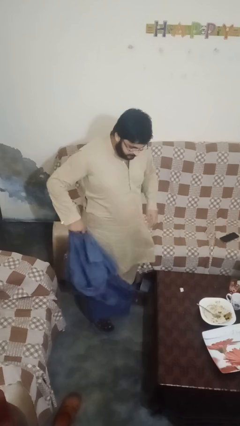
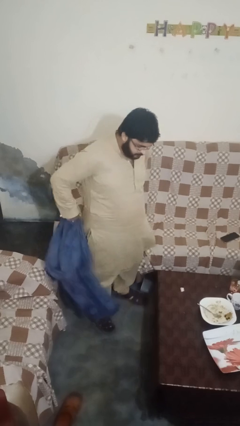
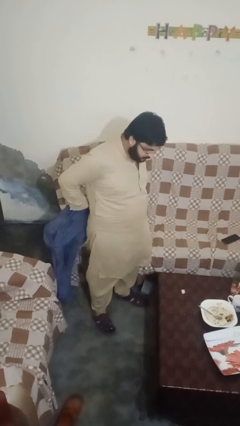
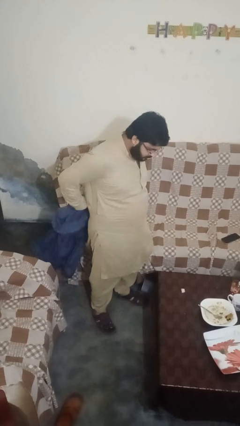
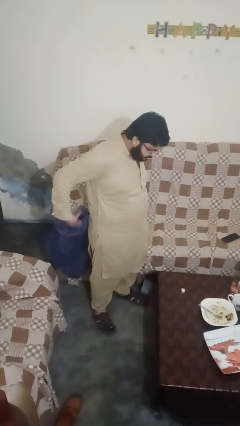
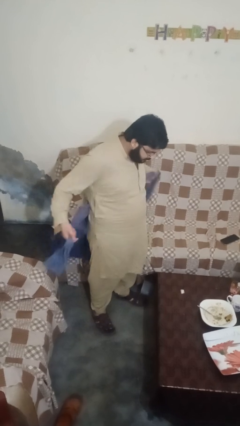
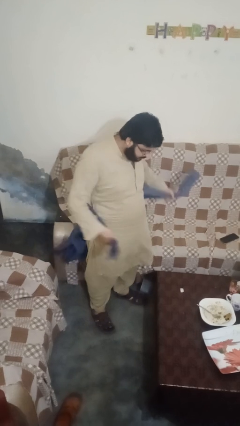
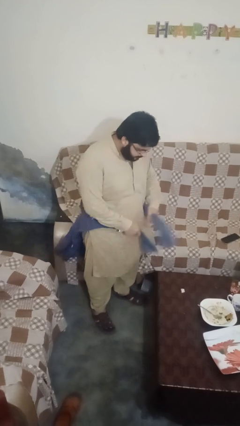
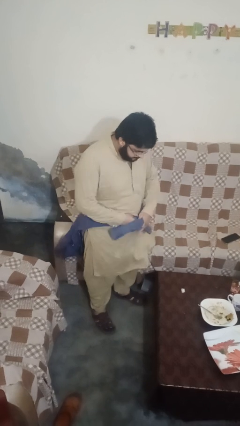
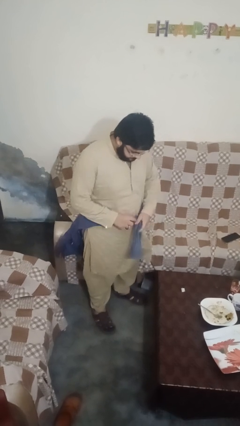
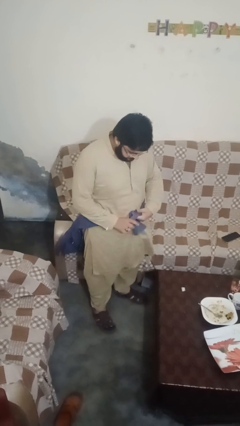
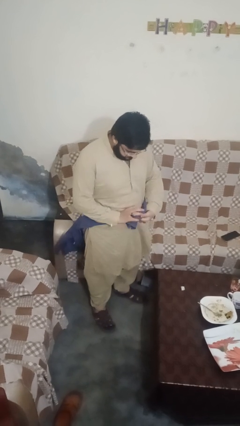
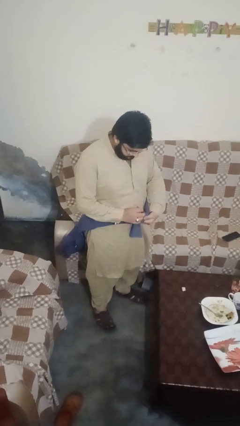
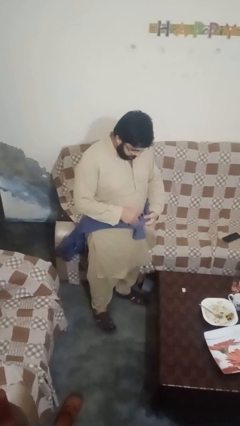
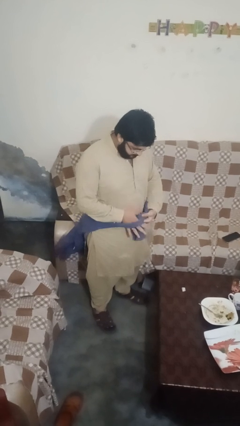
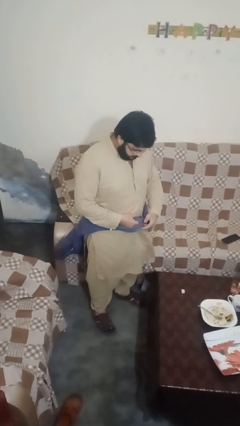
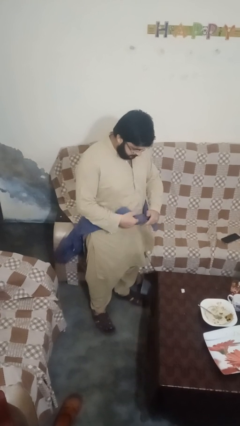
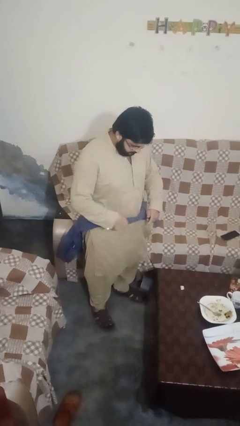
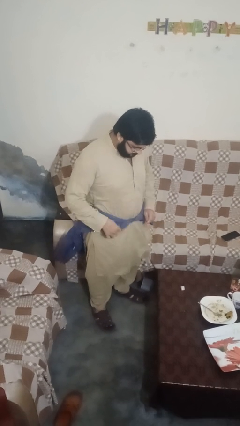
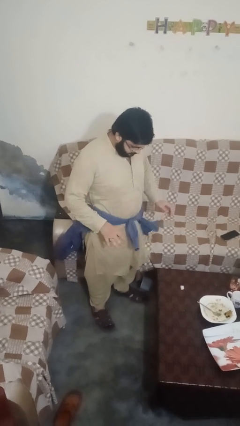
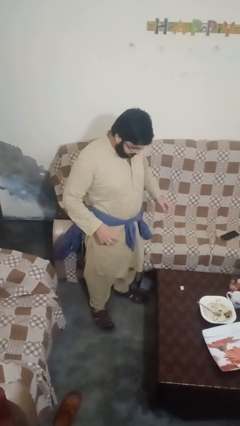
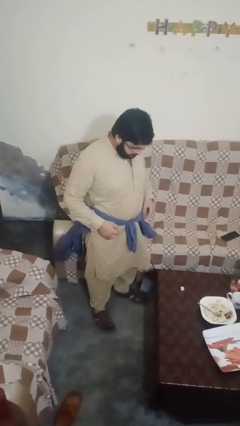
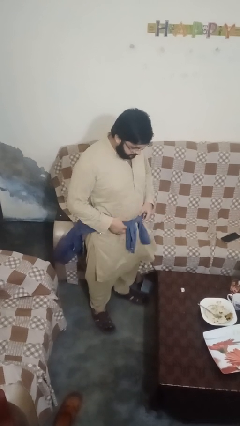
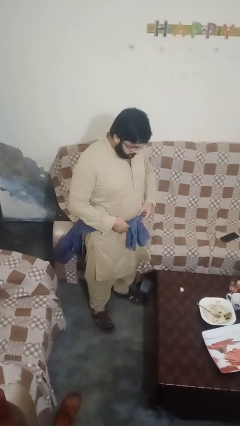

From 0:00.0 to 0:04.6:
person ties jacket around waist

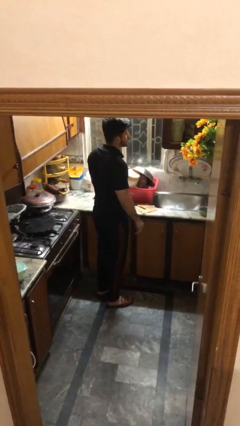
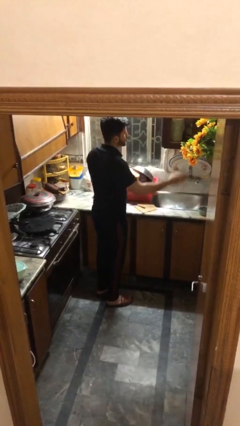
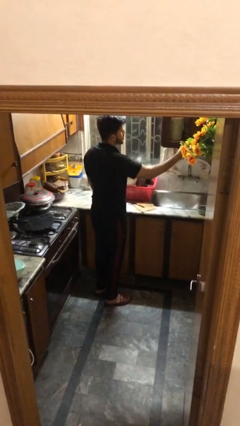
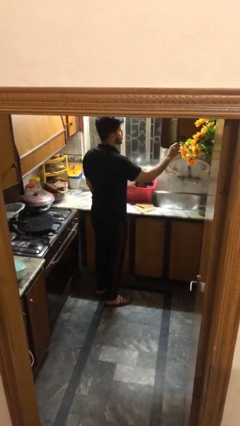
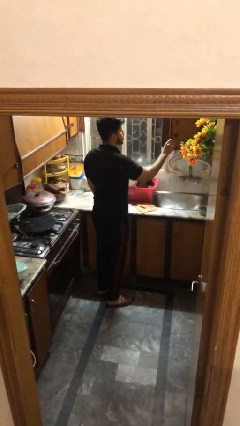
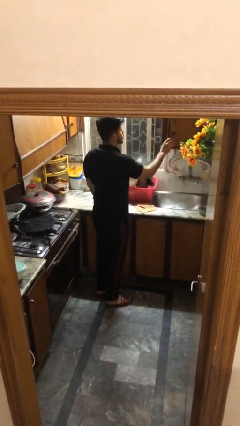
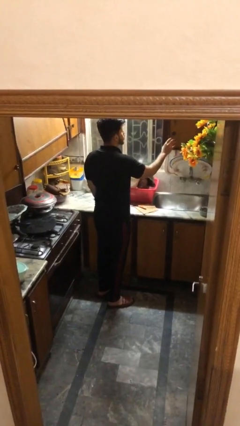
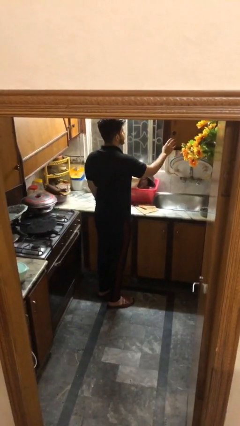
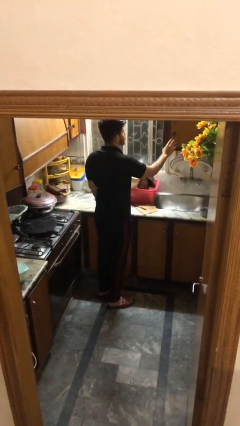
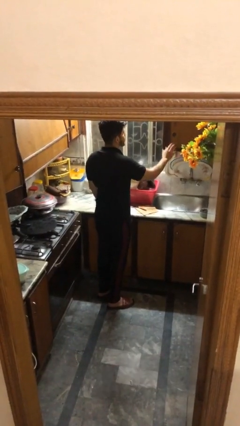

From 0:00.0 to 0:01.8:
person closes kitchen drawer

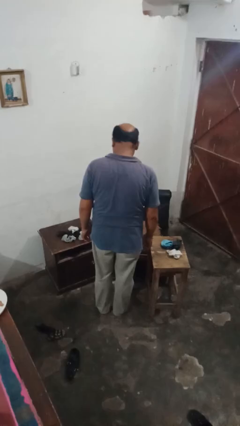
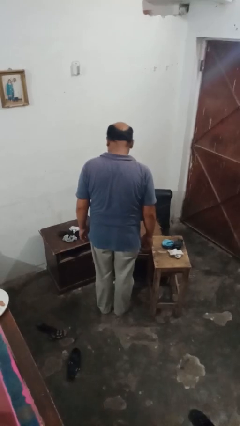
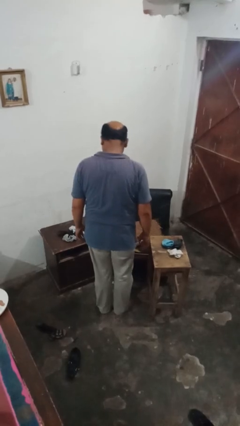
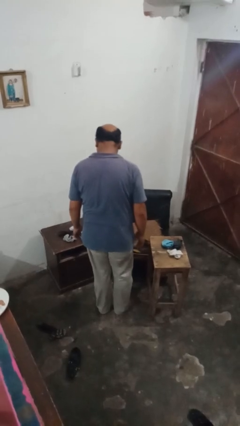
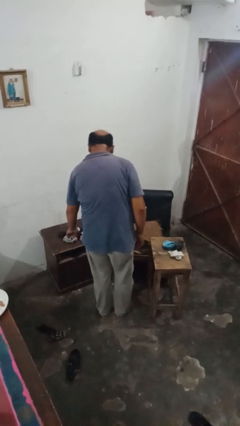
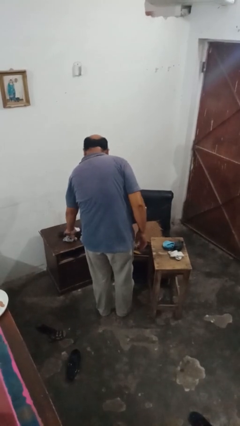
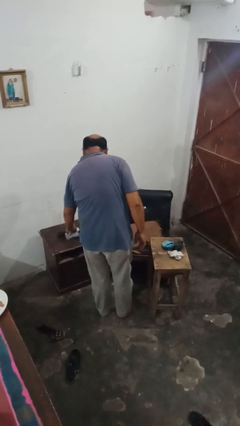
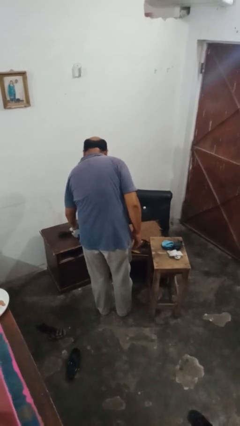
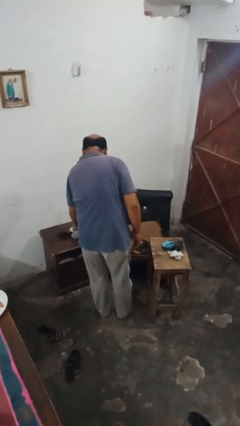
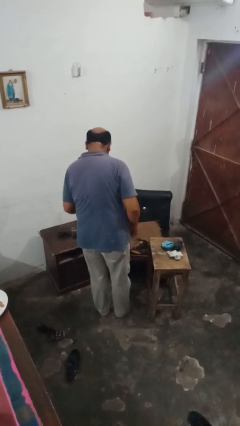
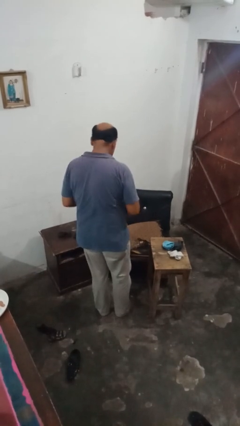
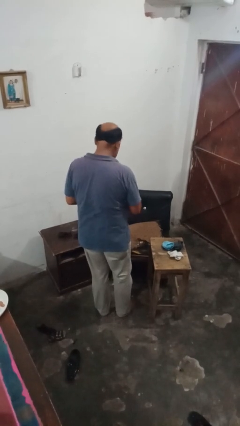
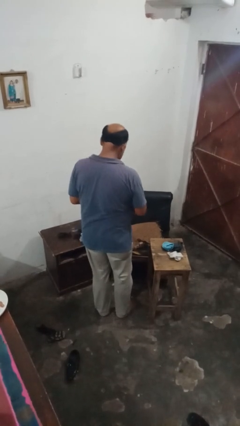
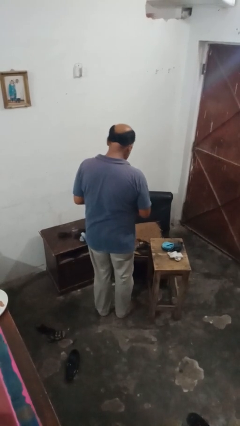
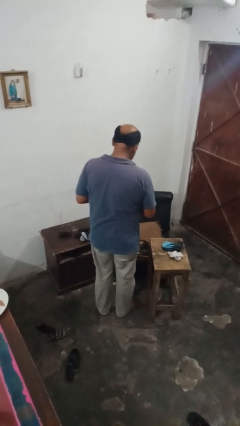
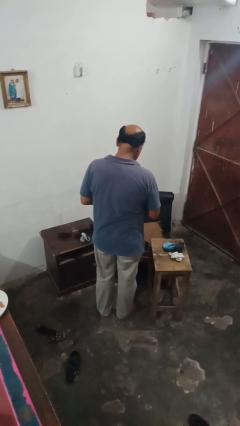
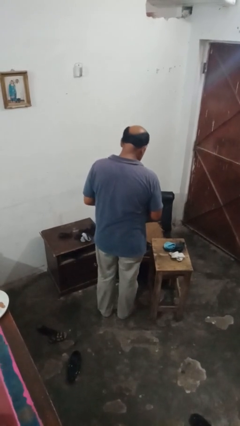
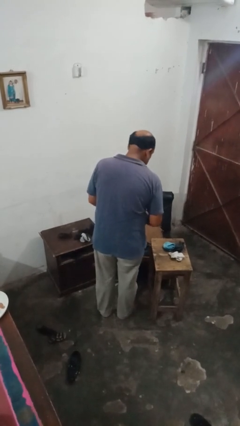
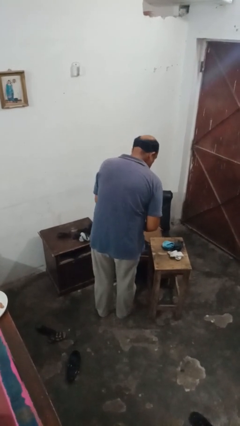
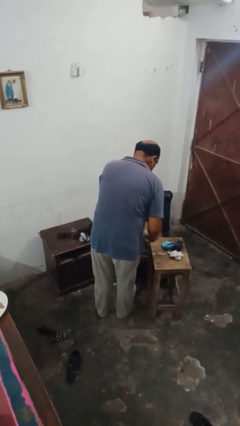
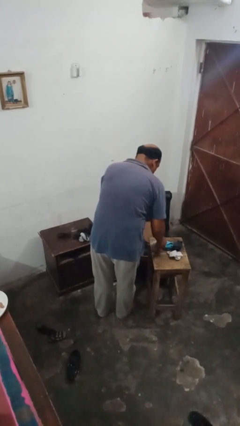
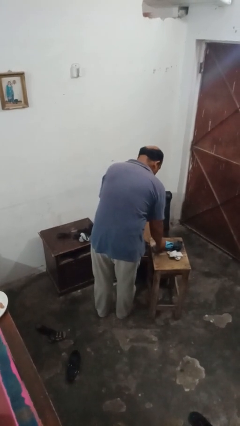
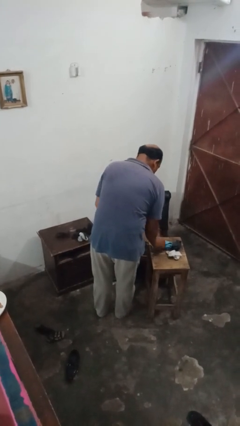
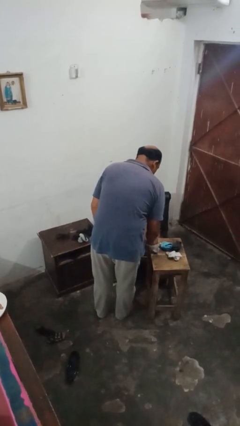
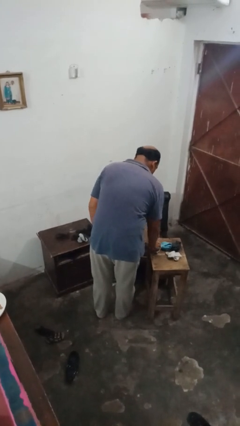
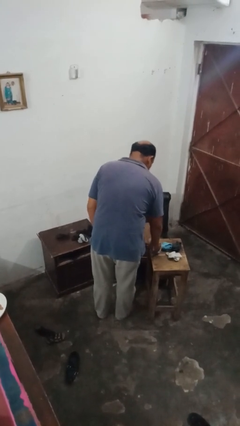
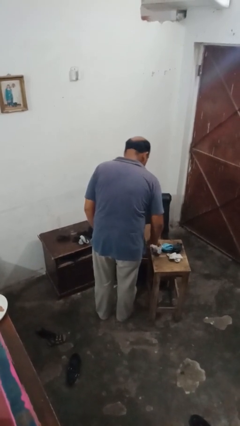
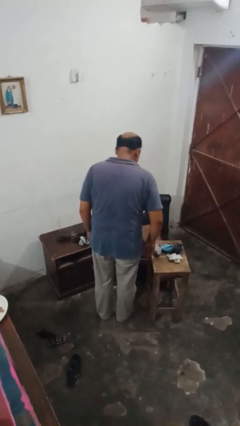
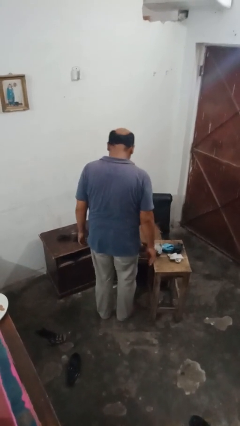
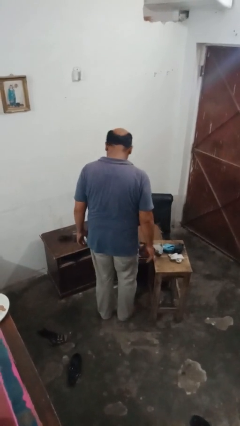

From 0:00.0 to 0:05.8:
person folds socks

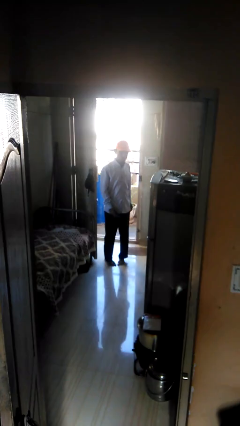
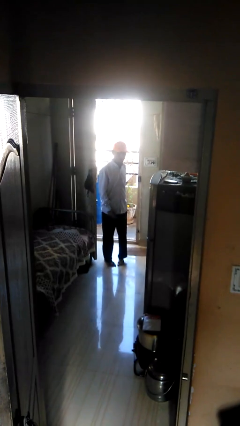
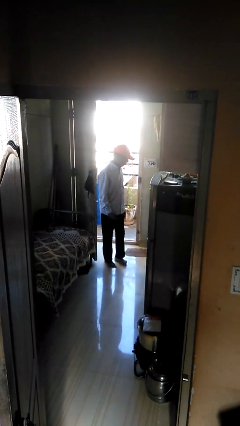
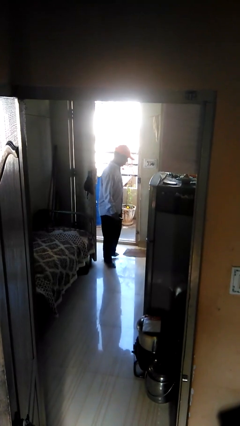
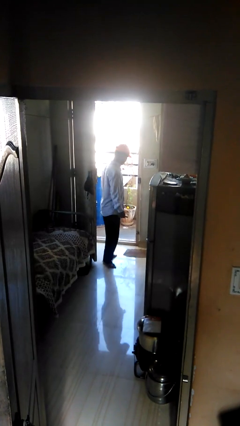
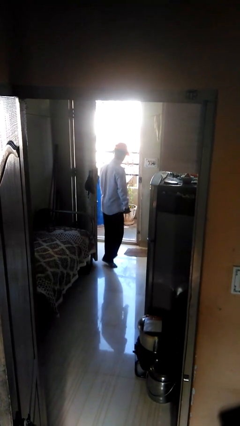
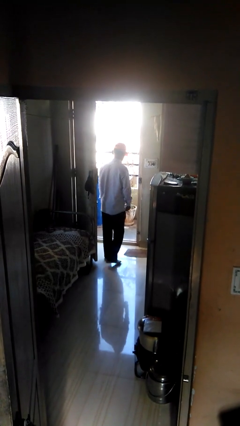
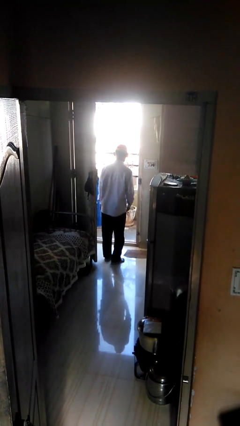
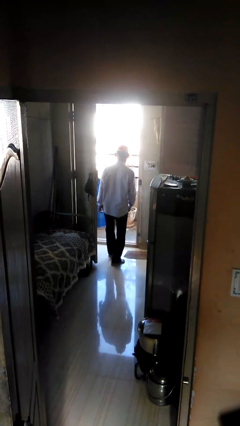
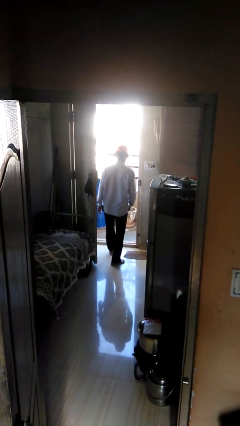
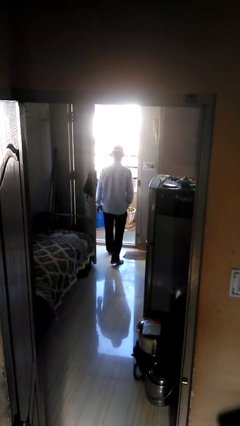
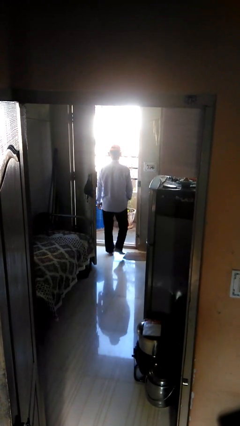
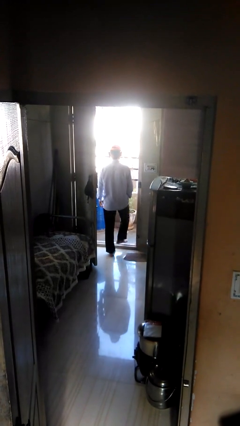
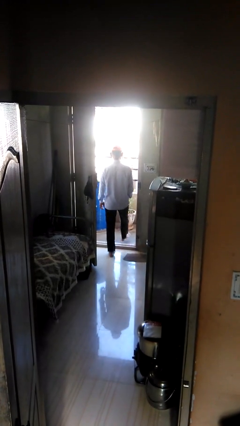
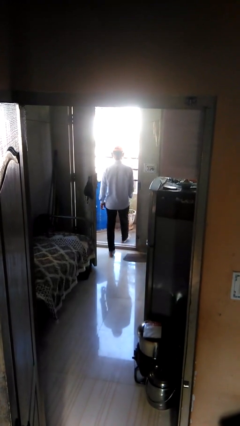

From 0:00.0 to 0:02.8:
person exits scene through structure

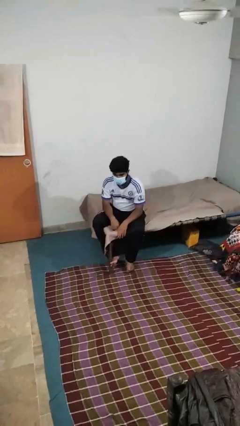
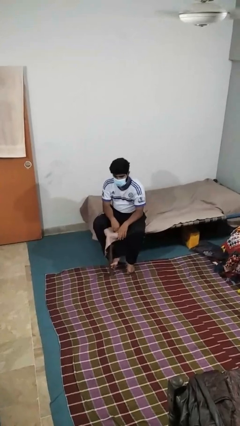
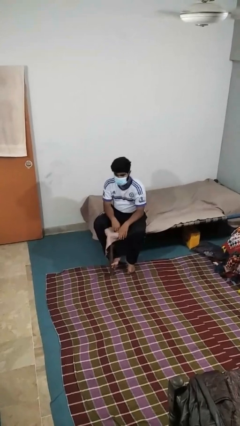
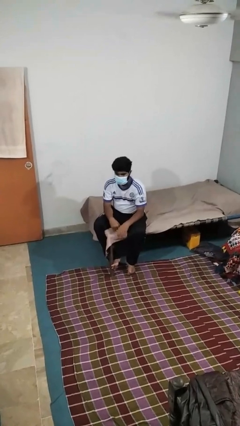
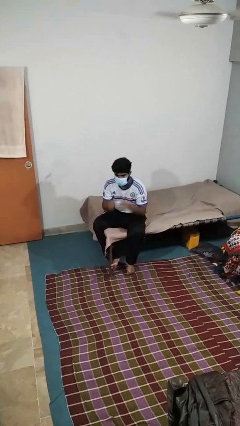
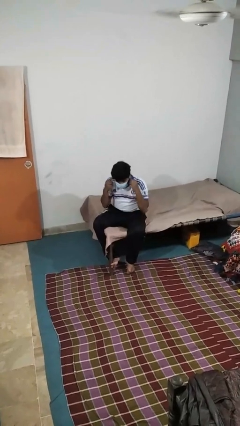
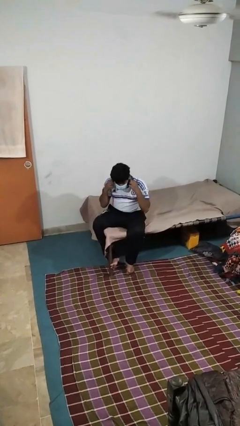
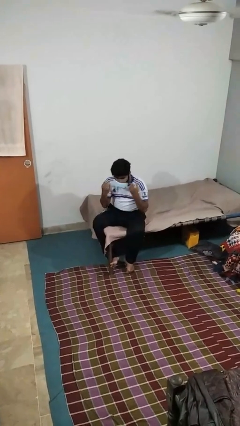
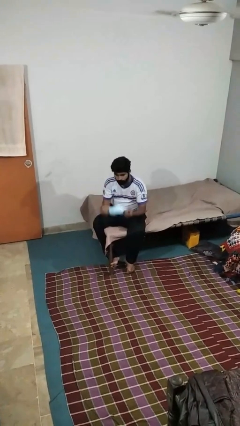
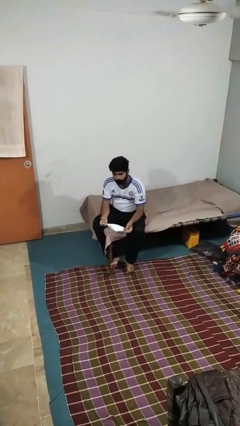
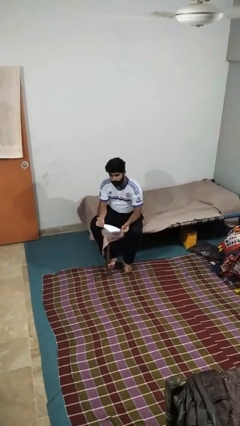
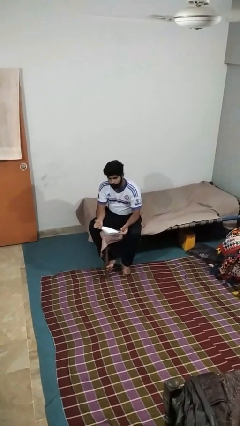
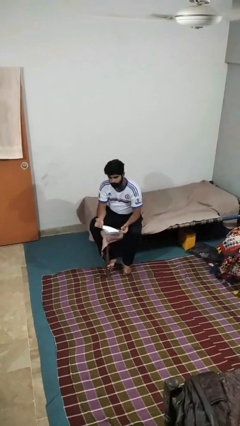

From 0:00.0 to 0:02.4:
person takes off facemask

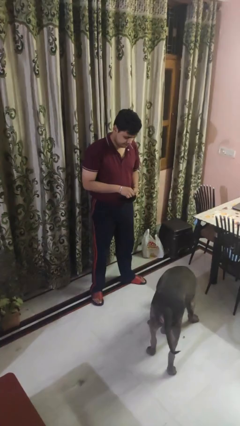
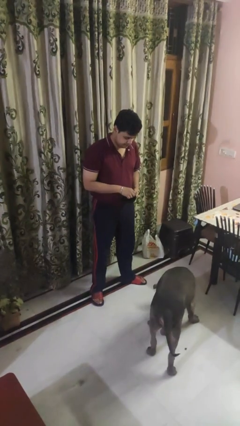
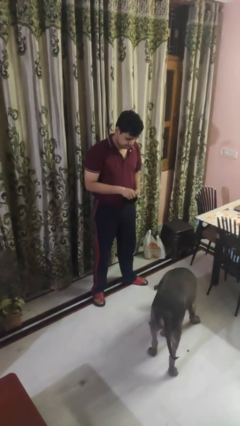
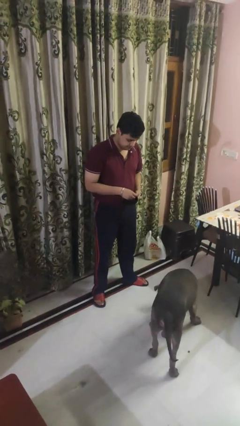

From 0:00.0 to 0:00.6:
person feeds dog
